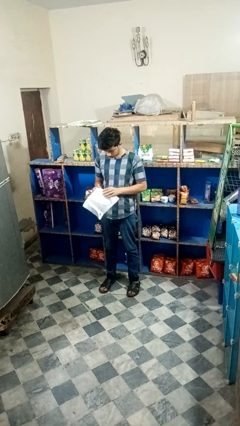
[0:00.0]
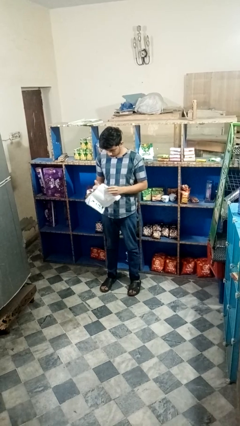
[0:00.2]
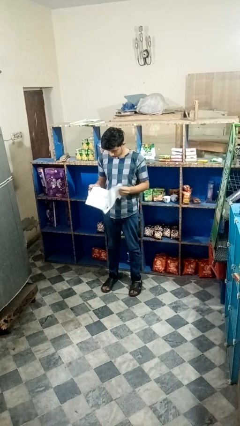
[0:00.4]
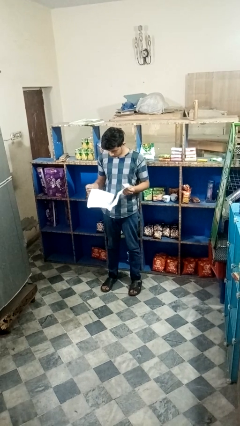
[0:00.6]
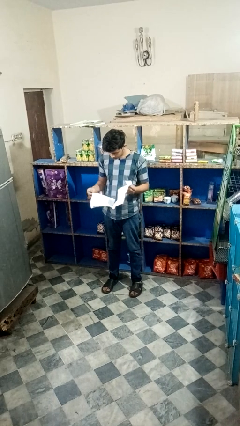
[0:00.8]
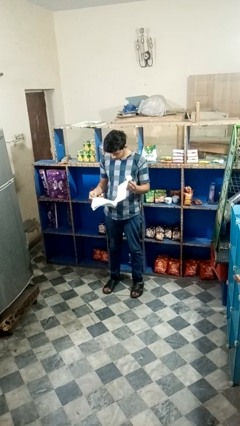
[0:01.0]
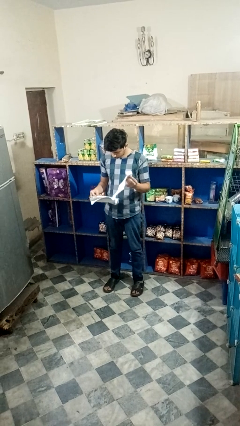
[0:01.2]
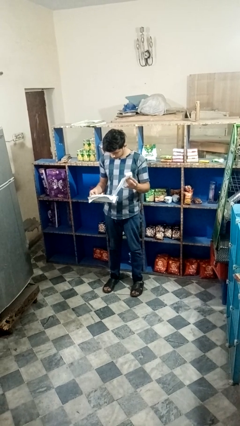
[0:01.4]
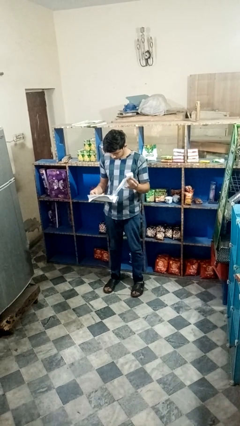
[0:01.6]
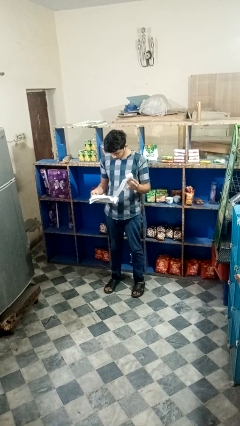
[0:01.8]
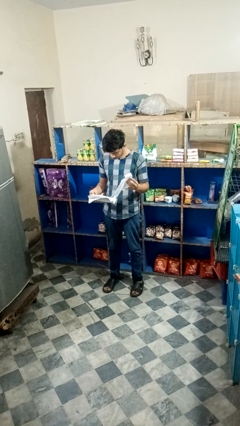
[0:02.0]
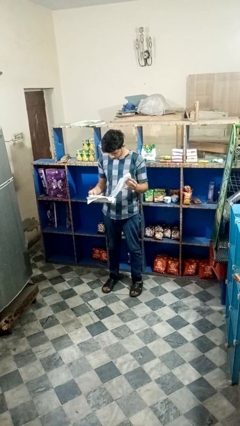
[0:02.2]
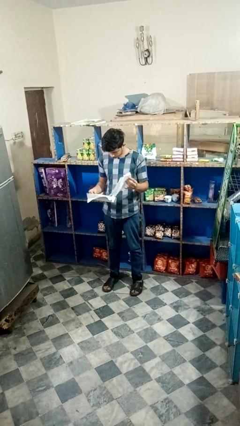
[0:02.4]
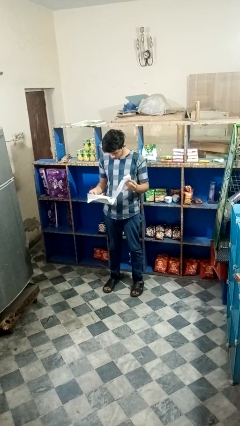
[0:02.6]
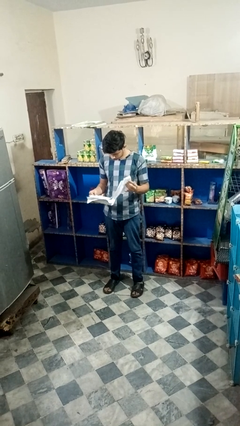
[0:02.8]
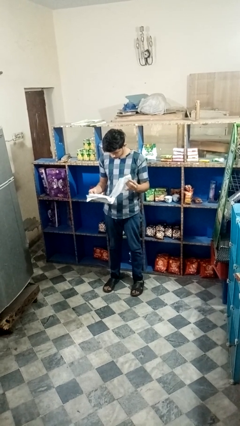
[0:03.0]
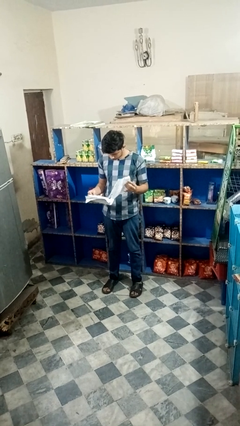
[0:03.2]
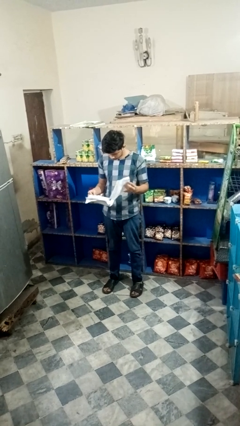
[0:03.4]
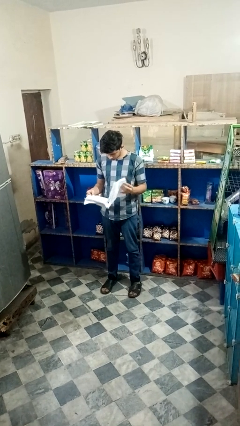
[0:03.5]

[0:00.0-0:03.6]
person reads newspaper

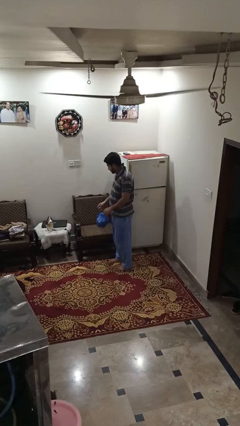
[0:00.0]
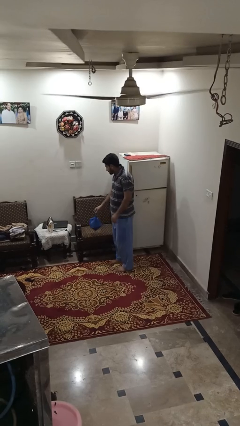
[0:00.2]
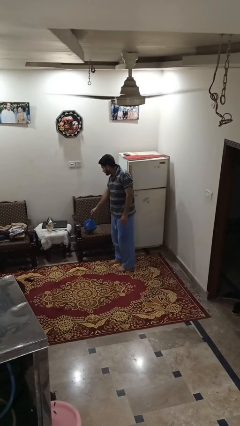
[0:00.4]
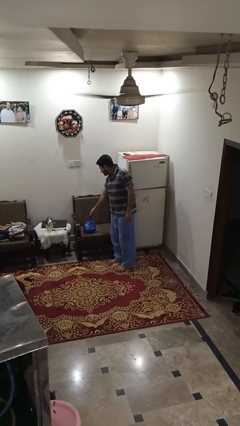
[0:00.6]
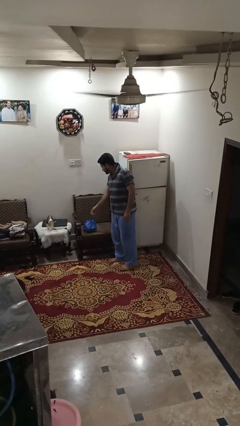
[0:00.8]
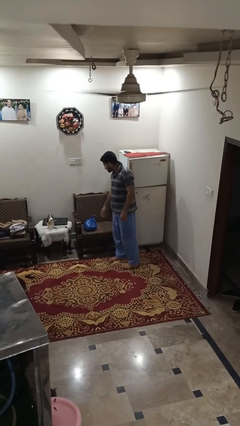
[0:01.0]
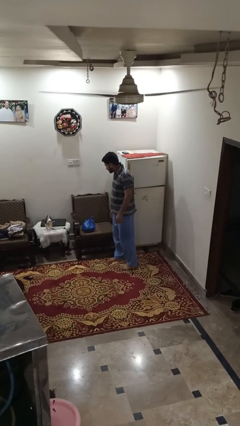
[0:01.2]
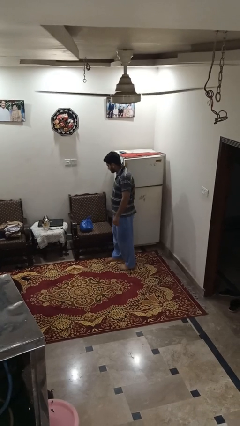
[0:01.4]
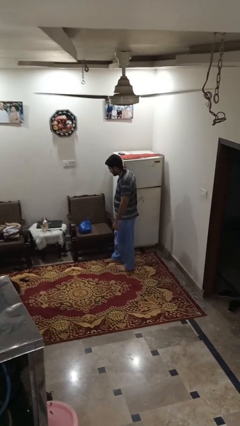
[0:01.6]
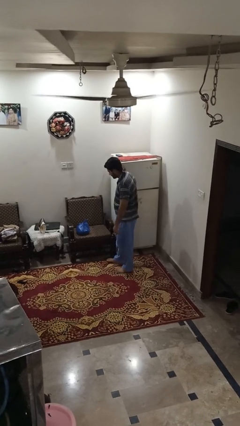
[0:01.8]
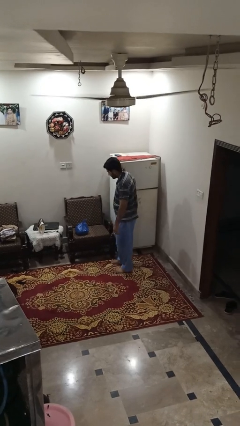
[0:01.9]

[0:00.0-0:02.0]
person puts down object on couch

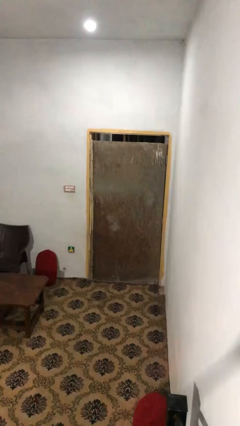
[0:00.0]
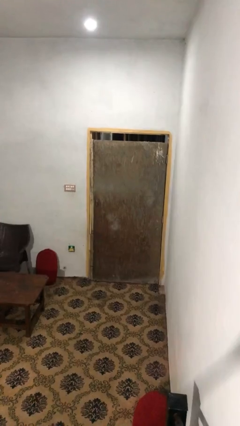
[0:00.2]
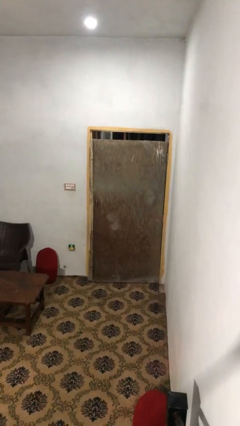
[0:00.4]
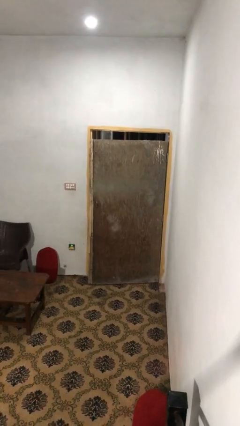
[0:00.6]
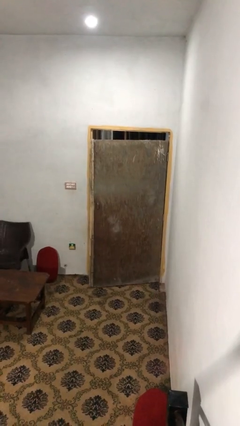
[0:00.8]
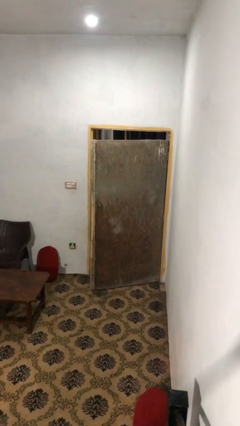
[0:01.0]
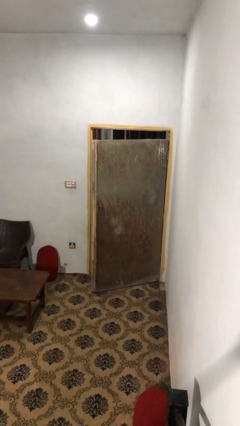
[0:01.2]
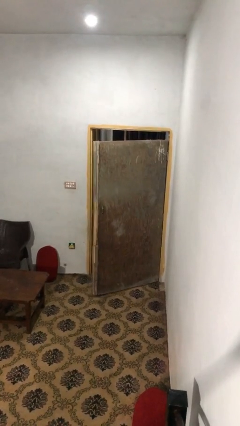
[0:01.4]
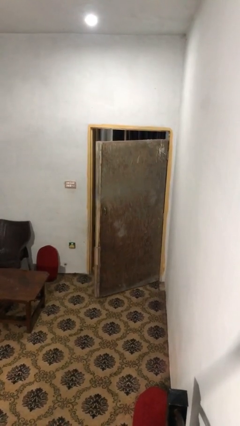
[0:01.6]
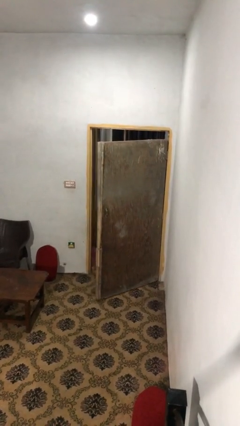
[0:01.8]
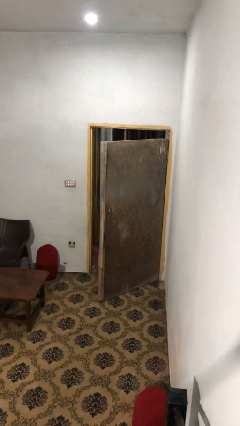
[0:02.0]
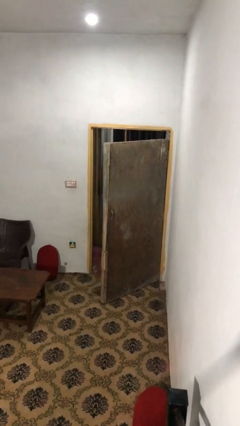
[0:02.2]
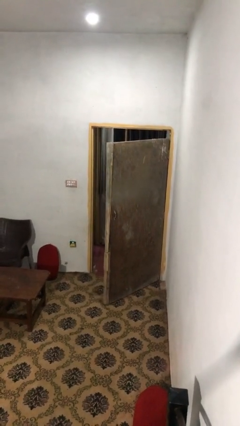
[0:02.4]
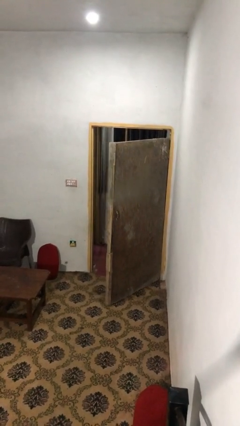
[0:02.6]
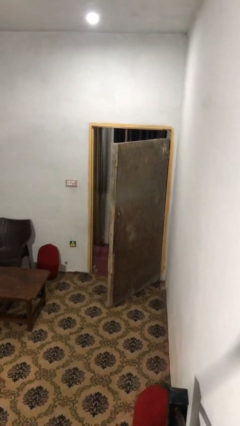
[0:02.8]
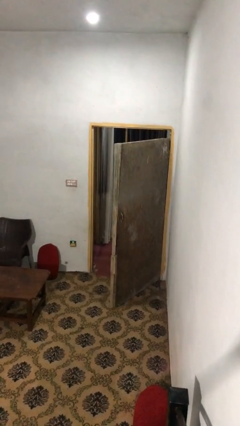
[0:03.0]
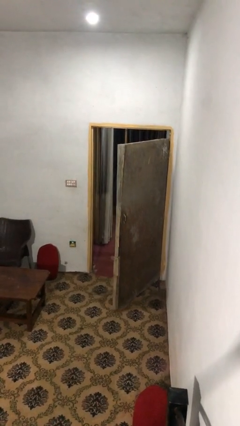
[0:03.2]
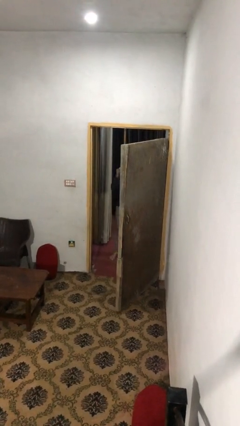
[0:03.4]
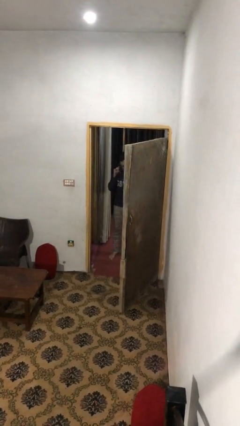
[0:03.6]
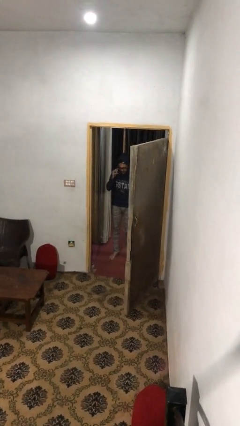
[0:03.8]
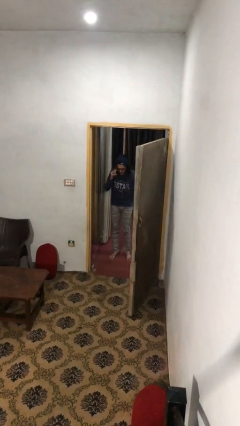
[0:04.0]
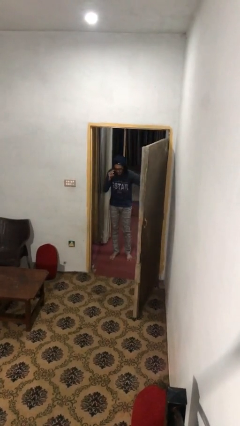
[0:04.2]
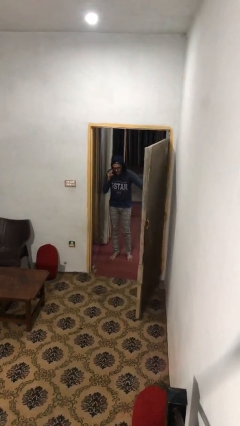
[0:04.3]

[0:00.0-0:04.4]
person opens facility door

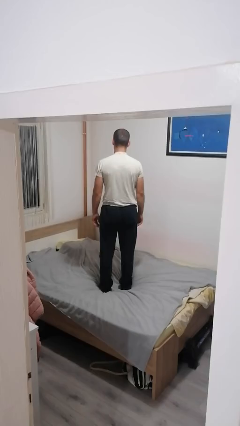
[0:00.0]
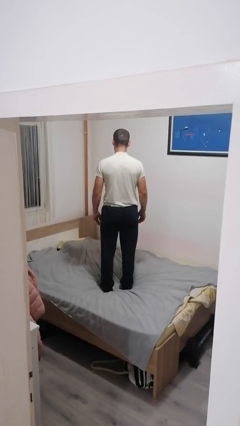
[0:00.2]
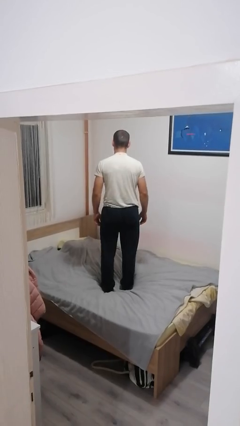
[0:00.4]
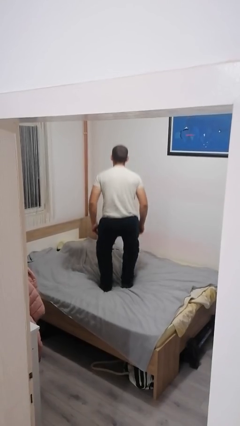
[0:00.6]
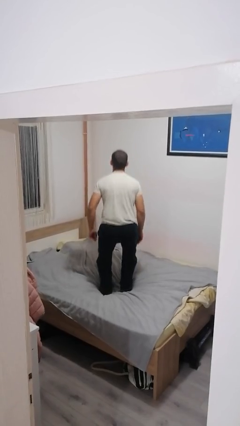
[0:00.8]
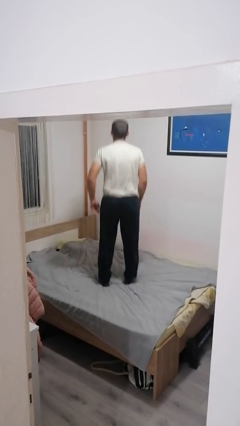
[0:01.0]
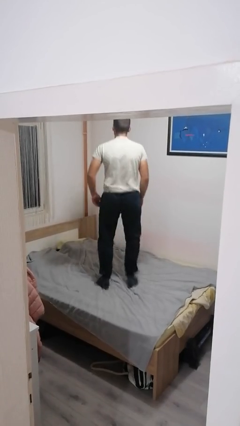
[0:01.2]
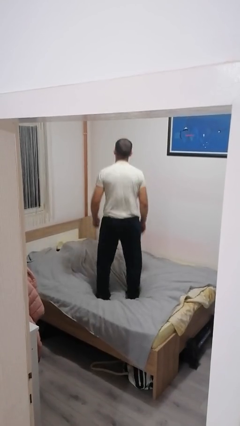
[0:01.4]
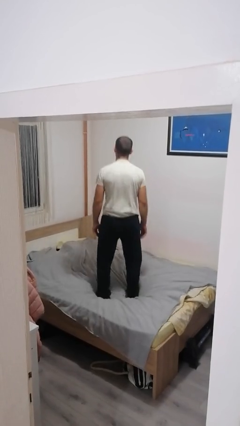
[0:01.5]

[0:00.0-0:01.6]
person jumps on bed

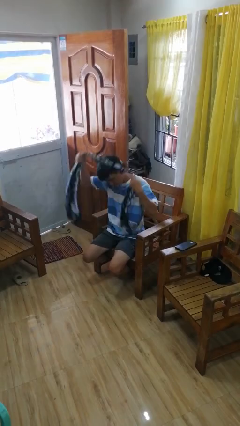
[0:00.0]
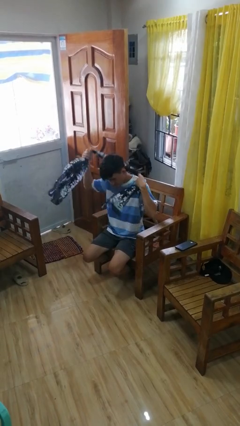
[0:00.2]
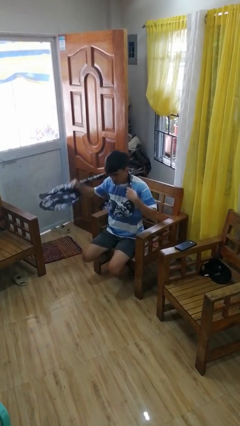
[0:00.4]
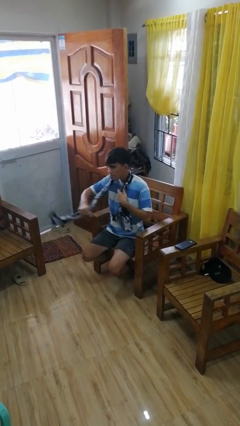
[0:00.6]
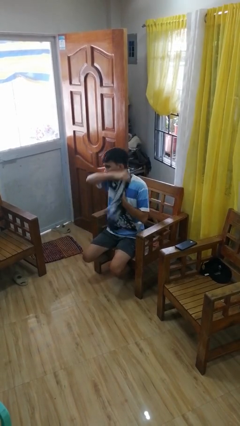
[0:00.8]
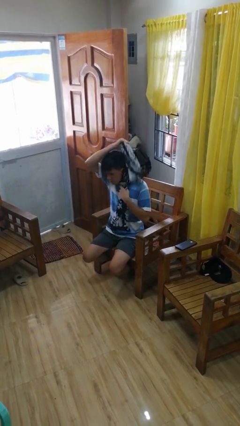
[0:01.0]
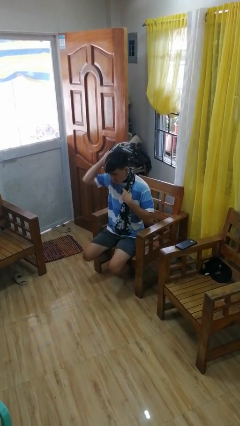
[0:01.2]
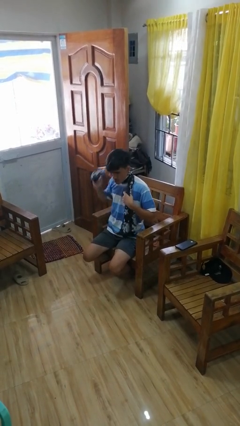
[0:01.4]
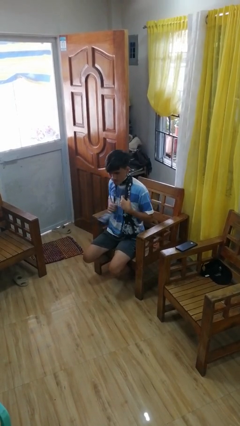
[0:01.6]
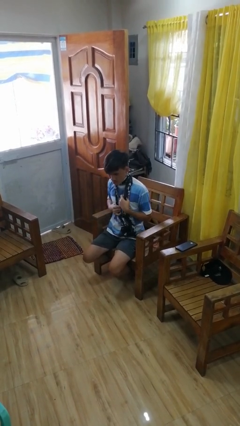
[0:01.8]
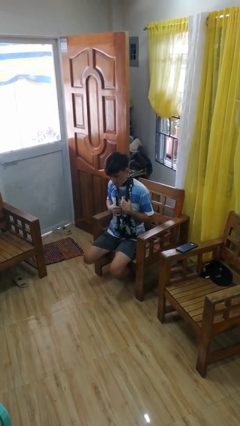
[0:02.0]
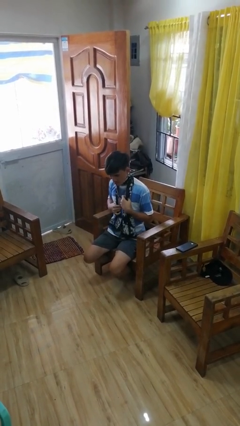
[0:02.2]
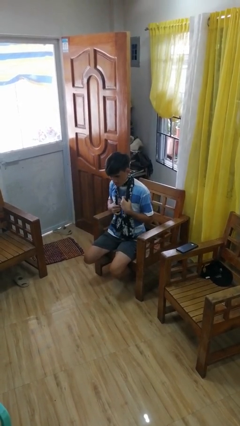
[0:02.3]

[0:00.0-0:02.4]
person puts on scarf

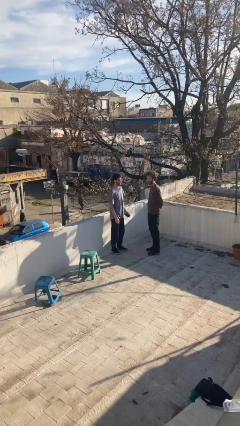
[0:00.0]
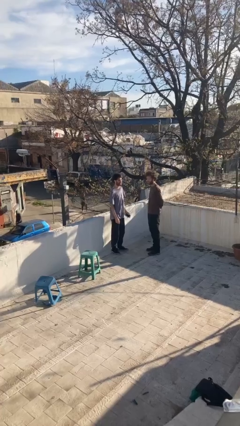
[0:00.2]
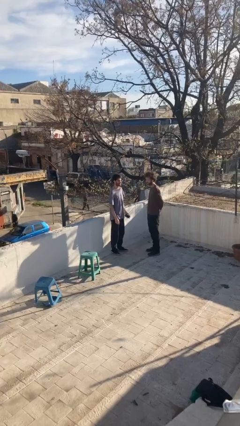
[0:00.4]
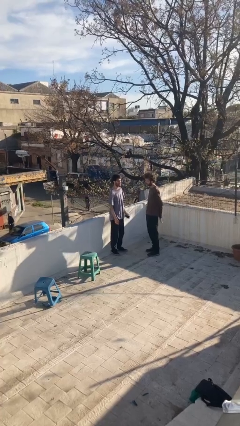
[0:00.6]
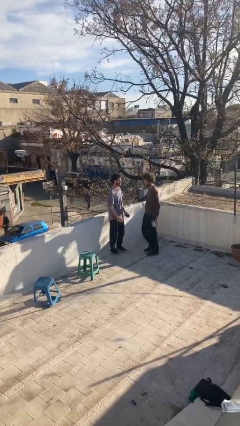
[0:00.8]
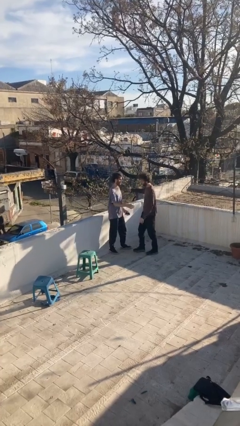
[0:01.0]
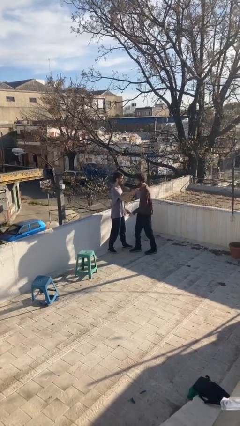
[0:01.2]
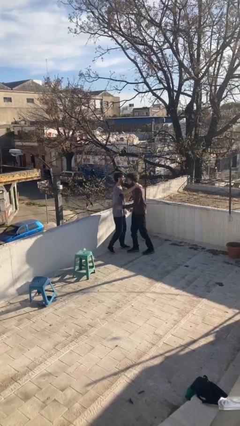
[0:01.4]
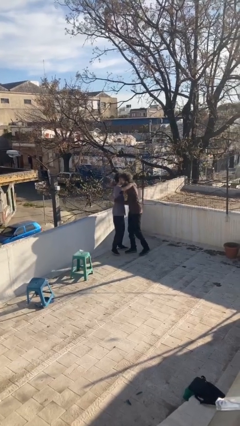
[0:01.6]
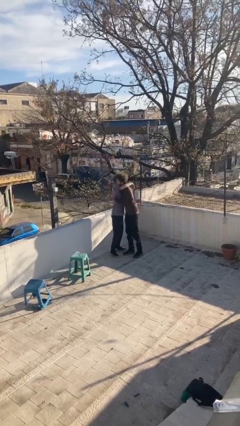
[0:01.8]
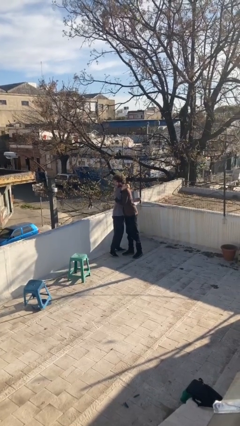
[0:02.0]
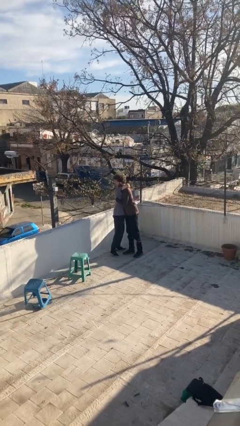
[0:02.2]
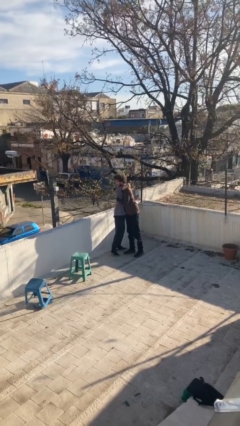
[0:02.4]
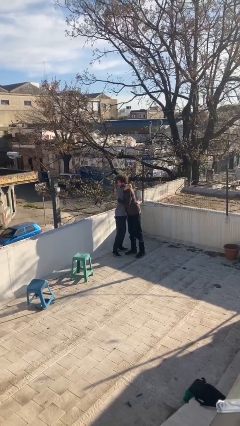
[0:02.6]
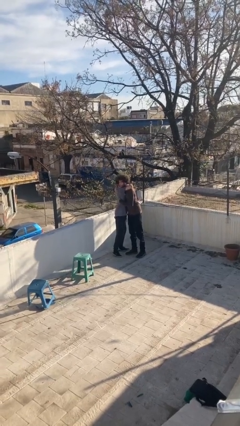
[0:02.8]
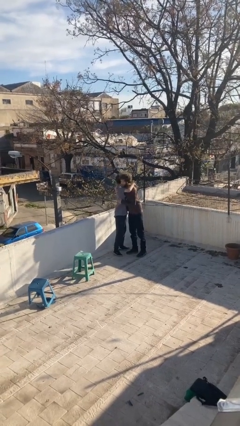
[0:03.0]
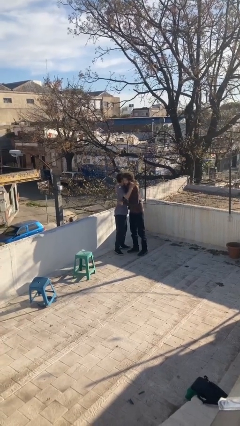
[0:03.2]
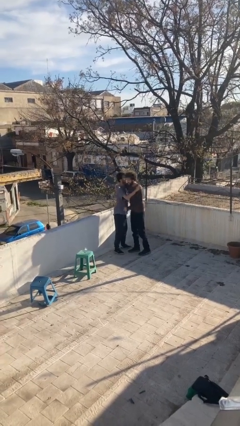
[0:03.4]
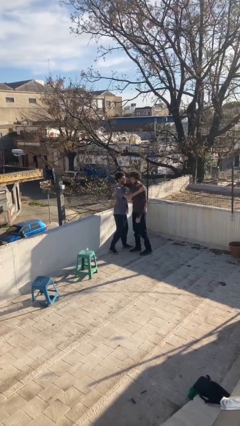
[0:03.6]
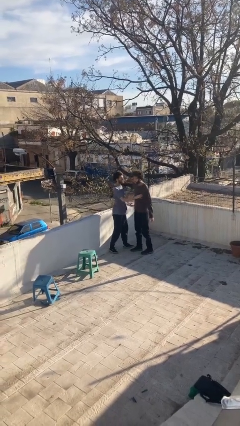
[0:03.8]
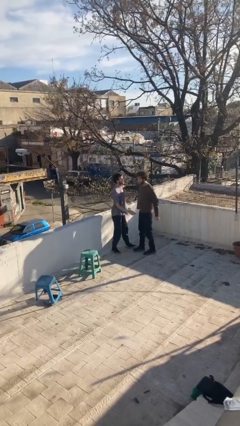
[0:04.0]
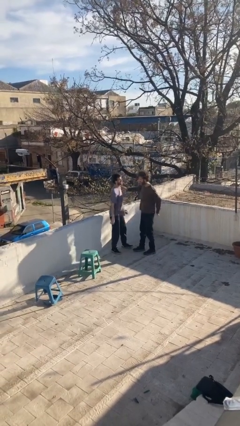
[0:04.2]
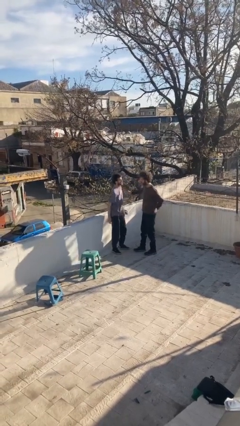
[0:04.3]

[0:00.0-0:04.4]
person embraces person
